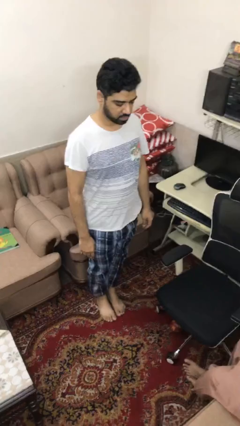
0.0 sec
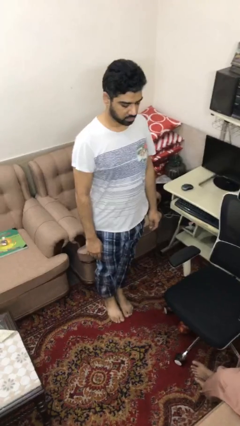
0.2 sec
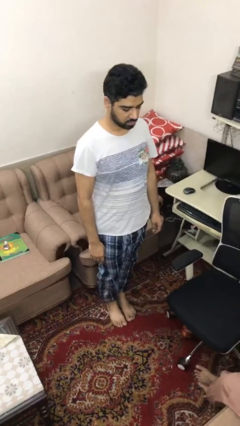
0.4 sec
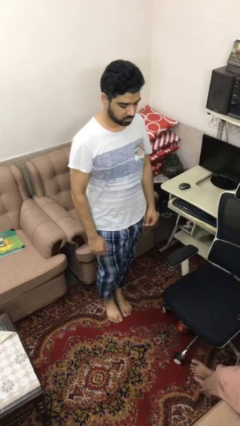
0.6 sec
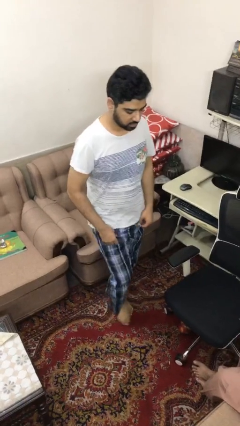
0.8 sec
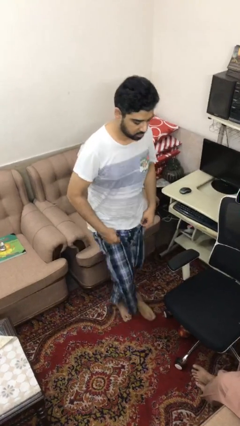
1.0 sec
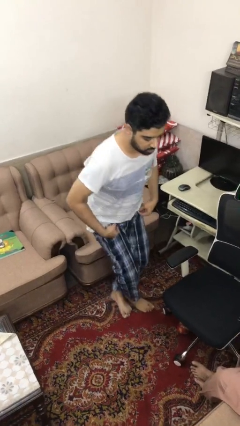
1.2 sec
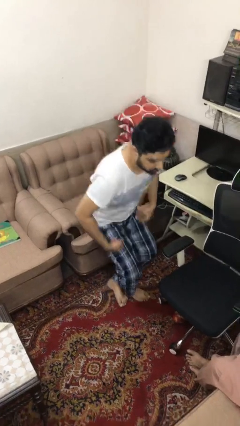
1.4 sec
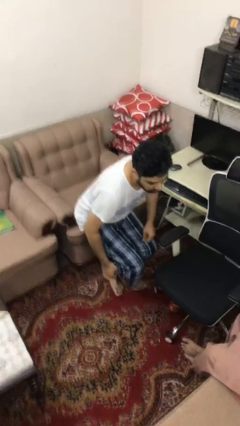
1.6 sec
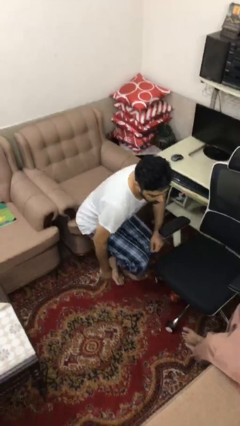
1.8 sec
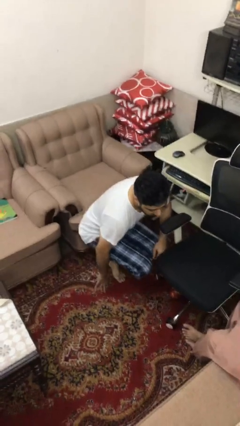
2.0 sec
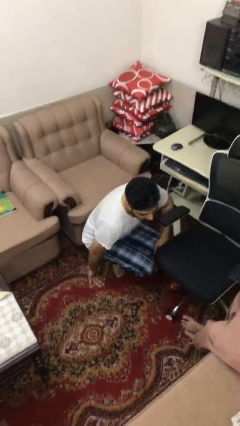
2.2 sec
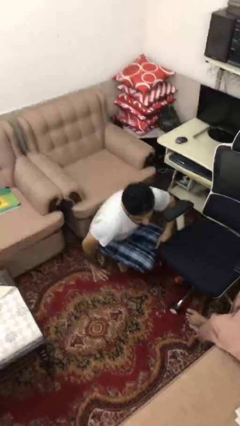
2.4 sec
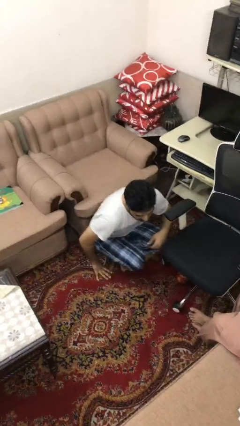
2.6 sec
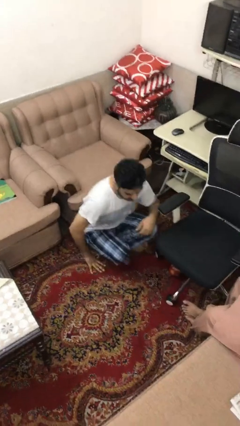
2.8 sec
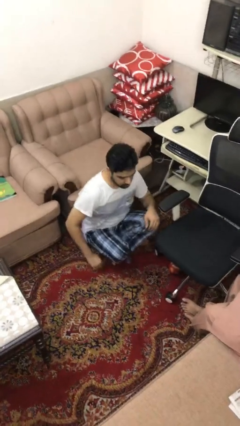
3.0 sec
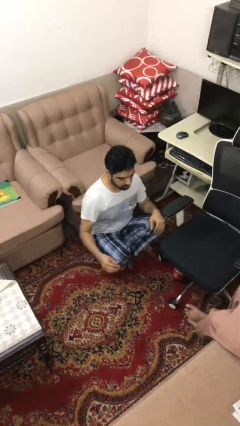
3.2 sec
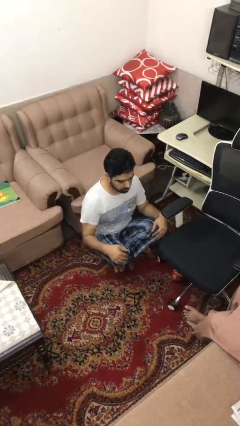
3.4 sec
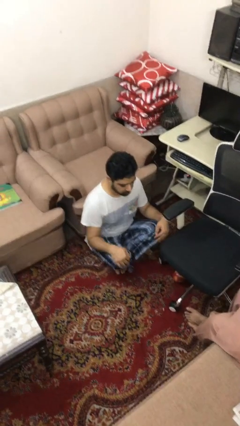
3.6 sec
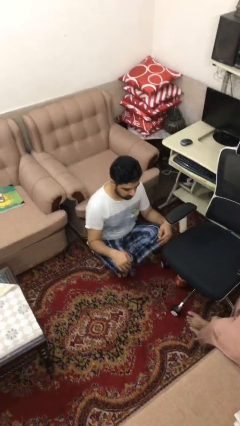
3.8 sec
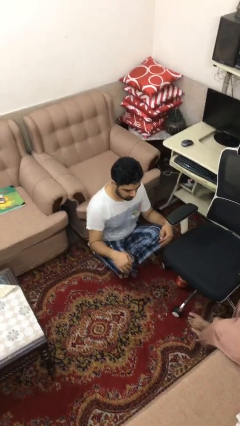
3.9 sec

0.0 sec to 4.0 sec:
person sits crisscross

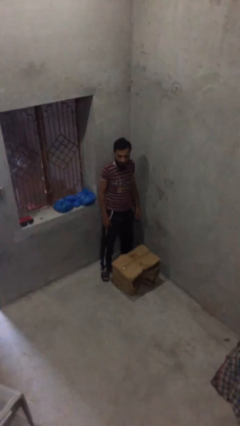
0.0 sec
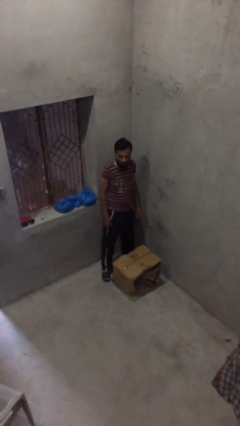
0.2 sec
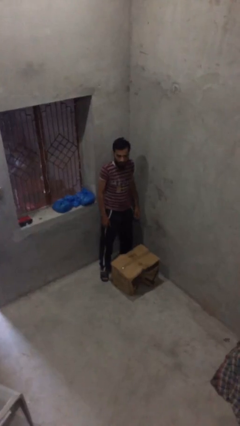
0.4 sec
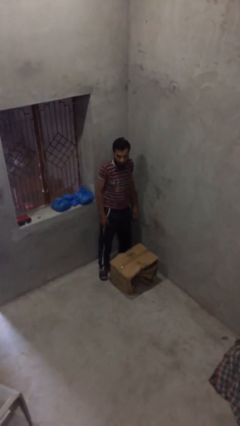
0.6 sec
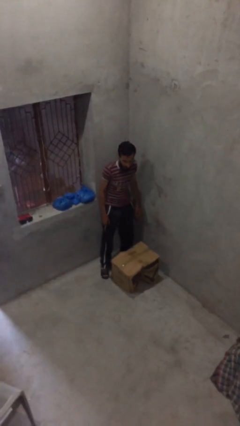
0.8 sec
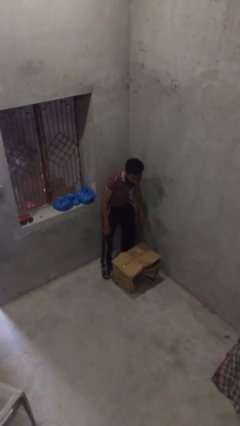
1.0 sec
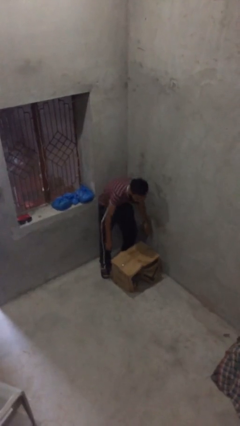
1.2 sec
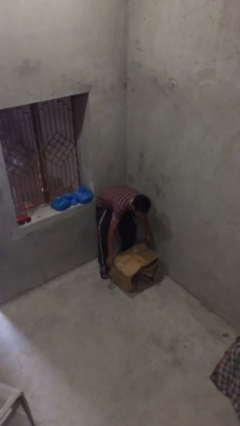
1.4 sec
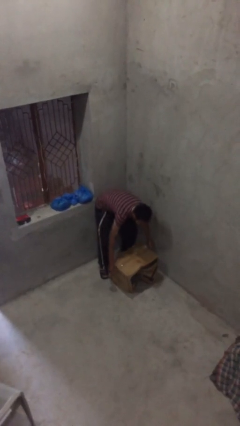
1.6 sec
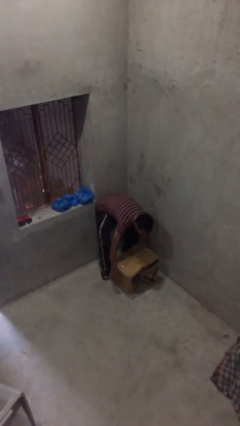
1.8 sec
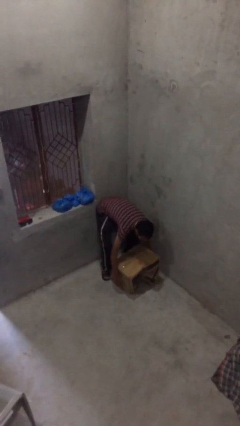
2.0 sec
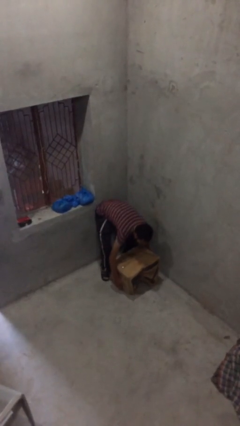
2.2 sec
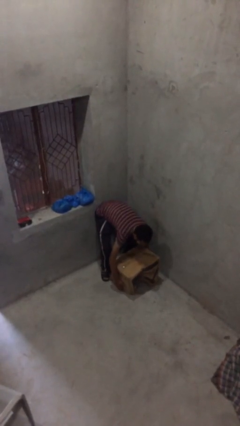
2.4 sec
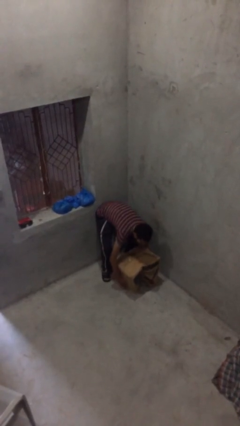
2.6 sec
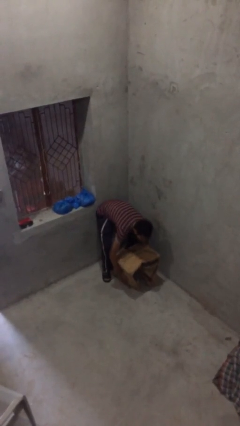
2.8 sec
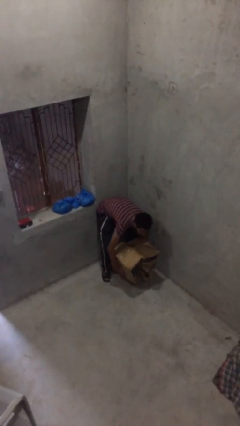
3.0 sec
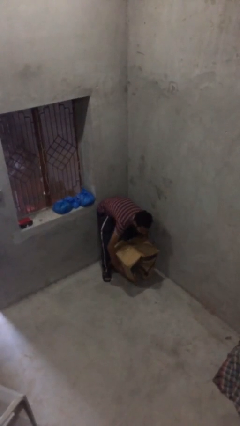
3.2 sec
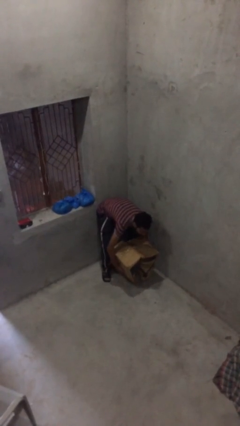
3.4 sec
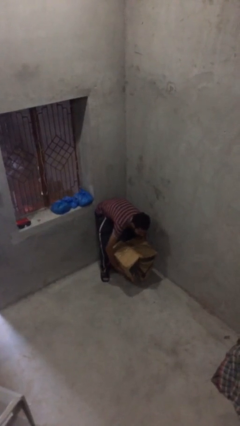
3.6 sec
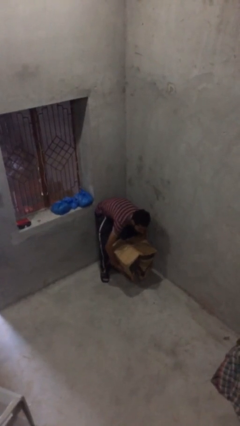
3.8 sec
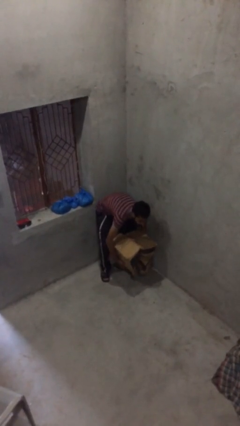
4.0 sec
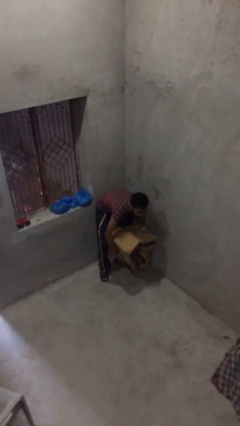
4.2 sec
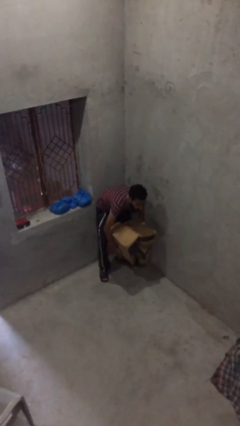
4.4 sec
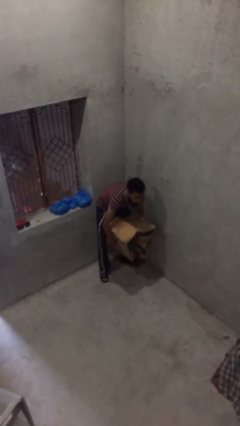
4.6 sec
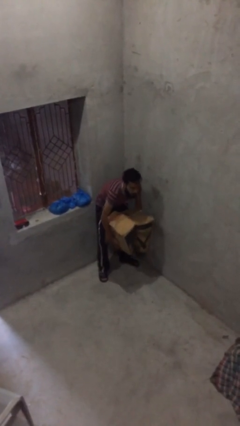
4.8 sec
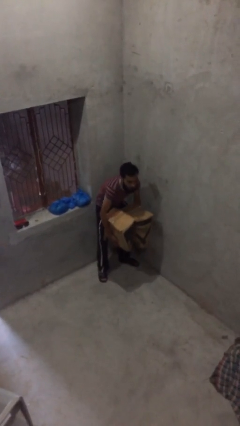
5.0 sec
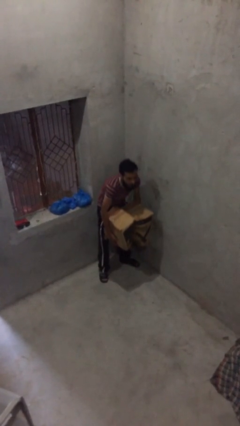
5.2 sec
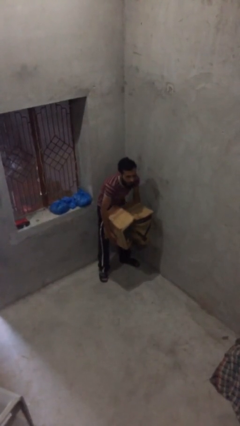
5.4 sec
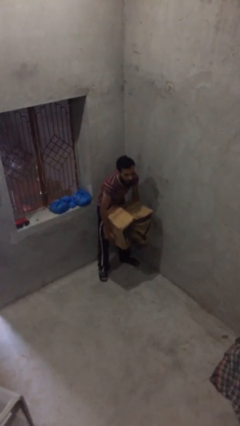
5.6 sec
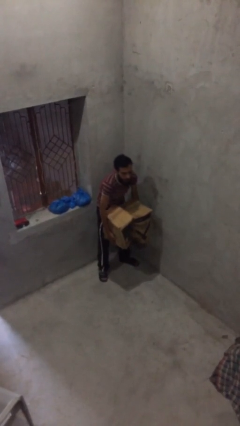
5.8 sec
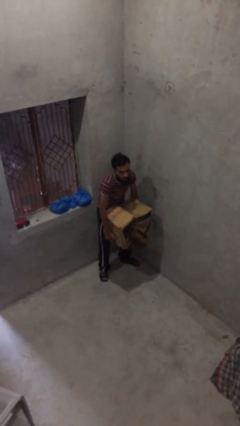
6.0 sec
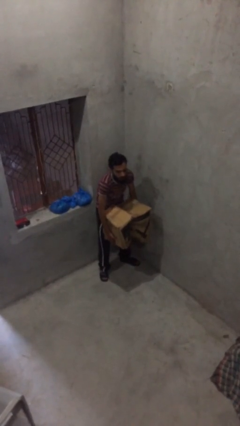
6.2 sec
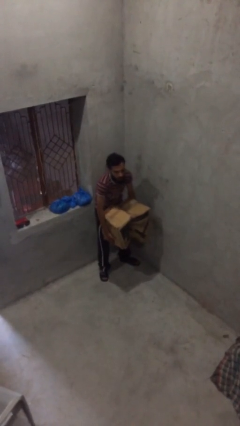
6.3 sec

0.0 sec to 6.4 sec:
person picks up object from floor

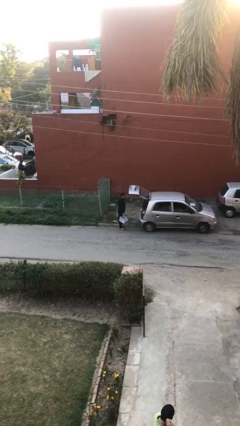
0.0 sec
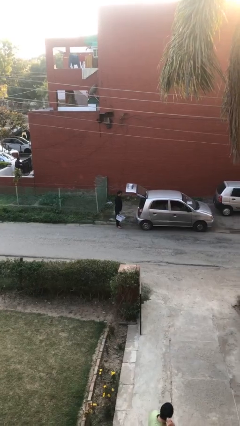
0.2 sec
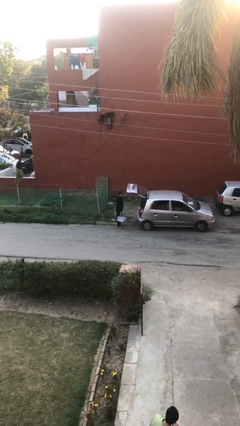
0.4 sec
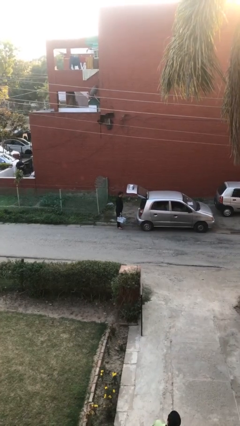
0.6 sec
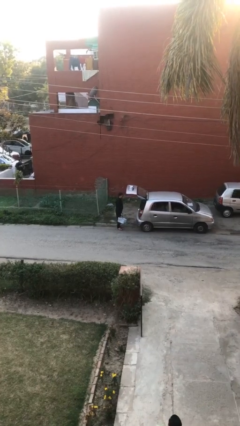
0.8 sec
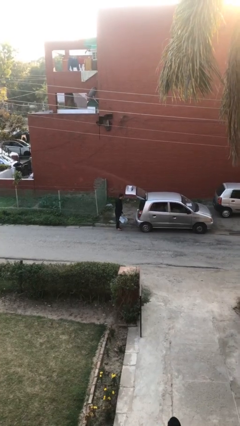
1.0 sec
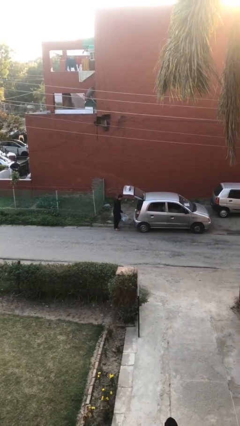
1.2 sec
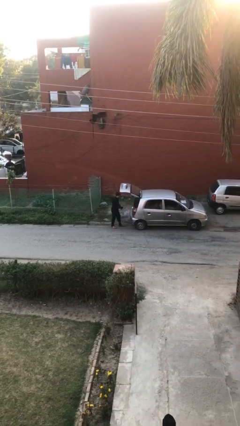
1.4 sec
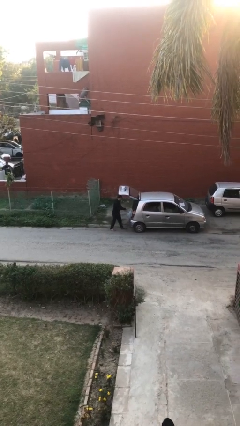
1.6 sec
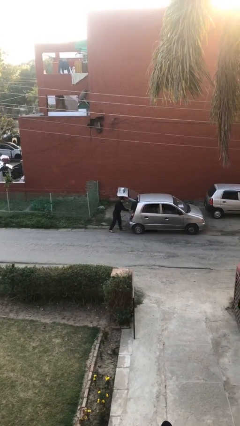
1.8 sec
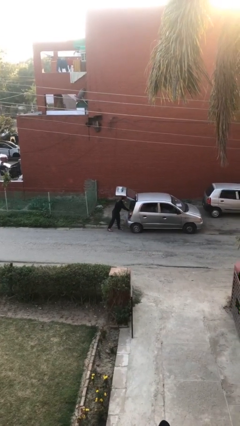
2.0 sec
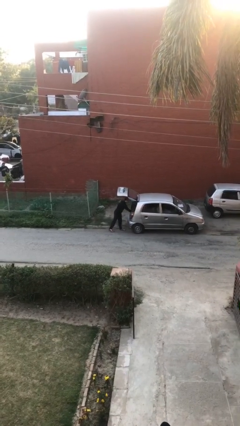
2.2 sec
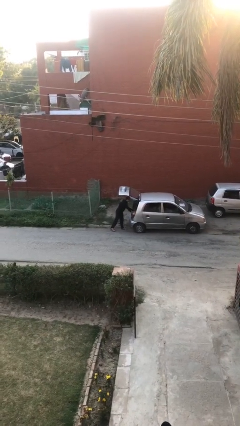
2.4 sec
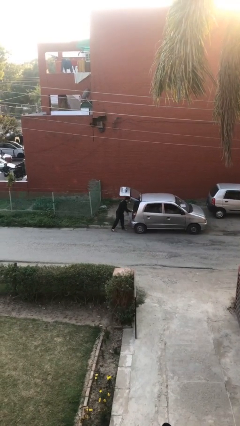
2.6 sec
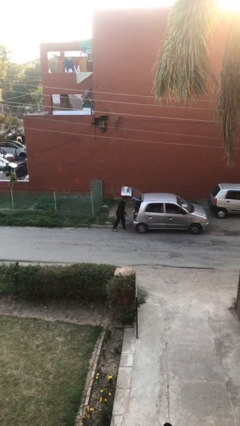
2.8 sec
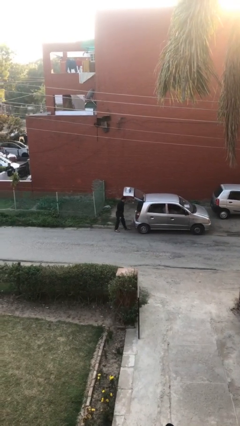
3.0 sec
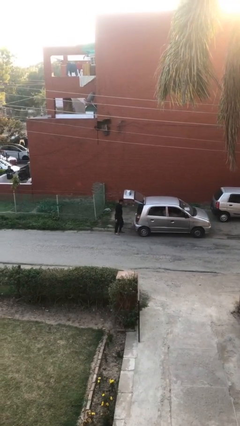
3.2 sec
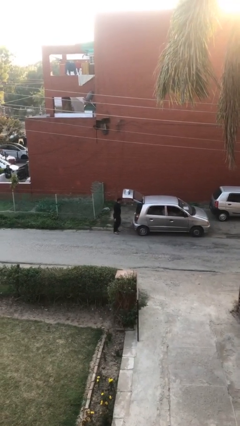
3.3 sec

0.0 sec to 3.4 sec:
person loads car

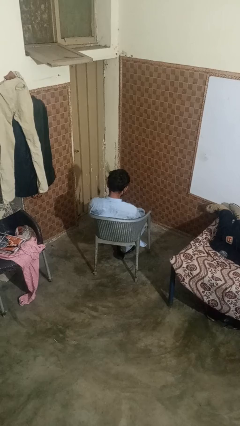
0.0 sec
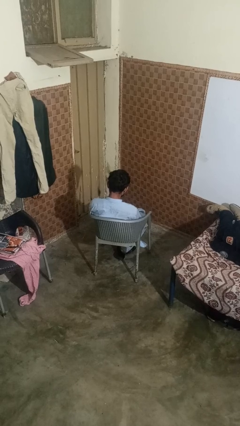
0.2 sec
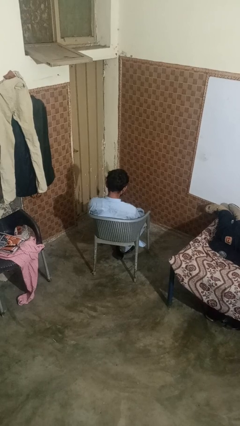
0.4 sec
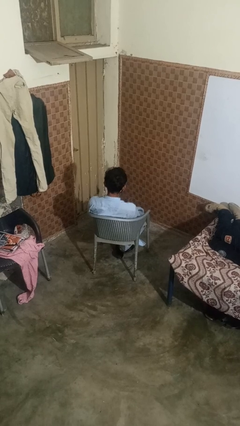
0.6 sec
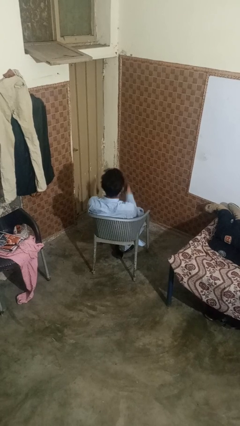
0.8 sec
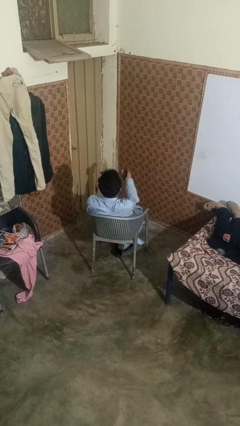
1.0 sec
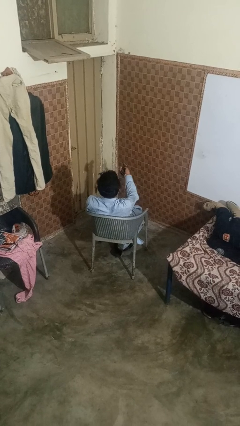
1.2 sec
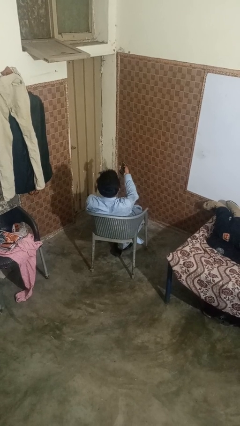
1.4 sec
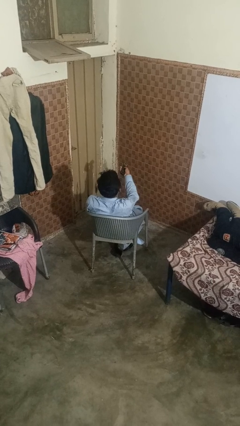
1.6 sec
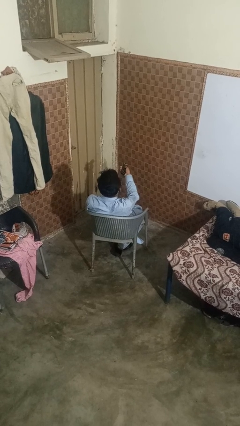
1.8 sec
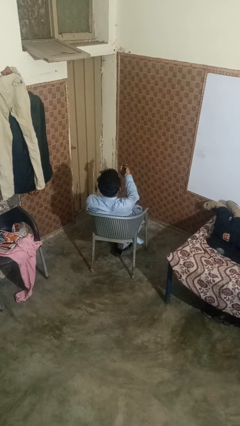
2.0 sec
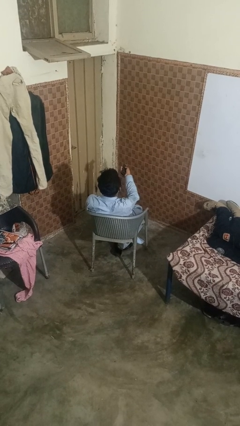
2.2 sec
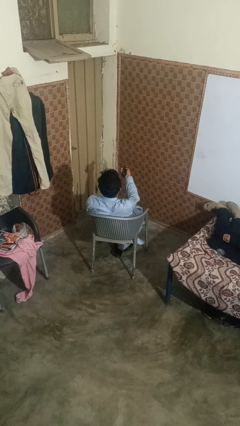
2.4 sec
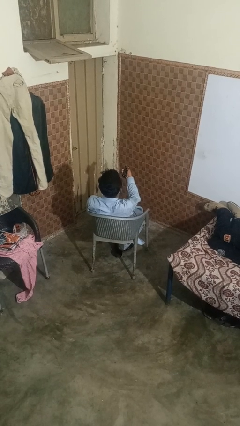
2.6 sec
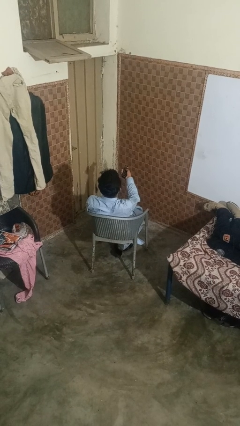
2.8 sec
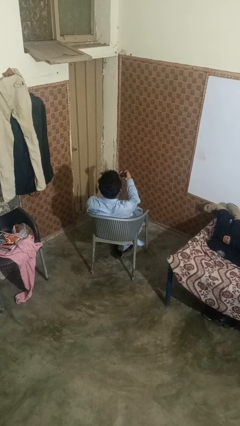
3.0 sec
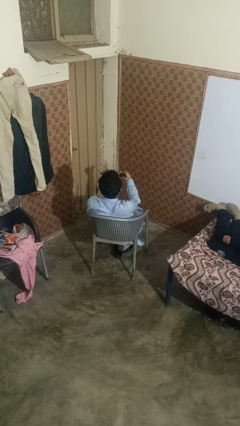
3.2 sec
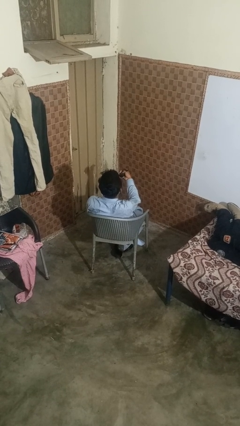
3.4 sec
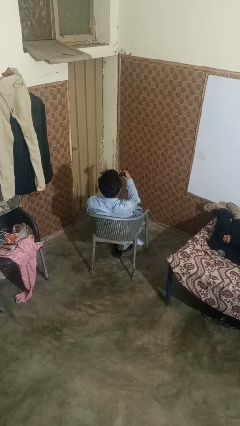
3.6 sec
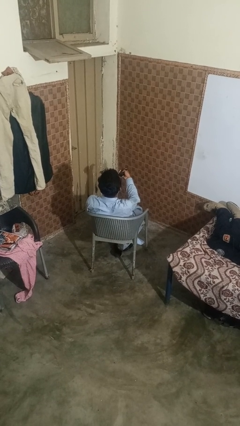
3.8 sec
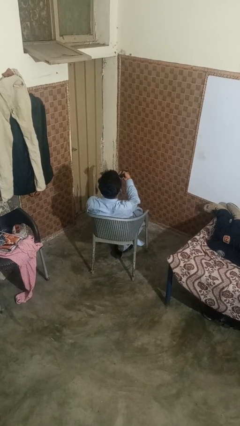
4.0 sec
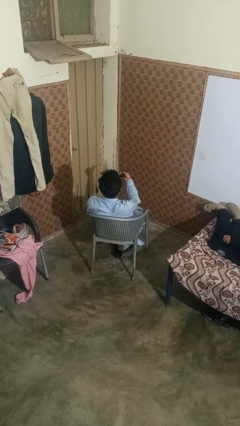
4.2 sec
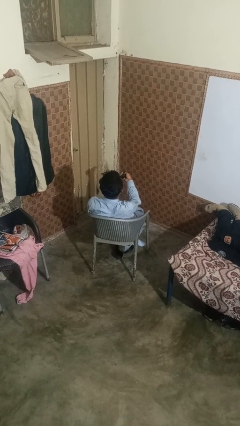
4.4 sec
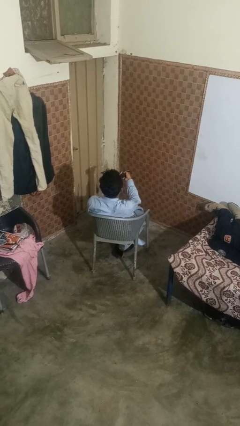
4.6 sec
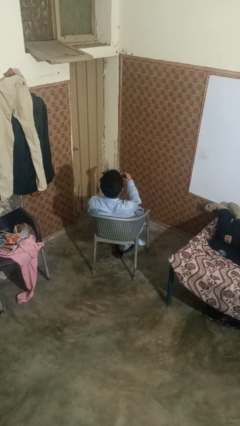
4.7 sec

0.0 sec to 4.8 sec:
person uses television remote
